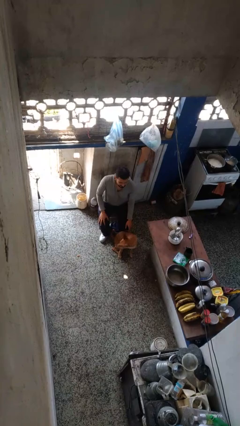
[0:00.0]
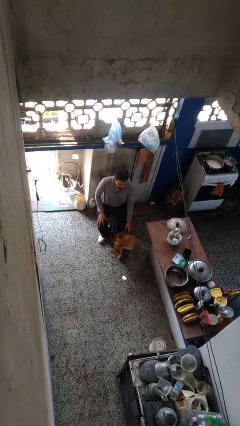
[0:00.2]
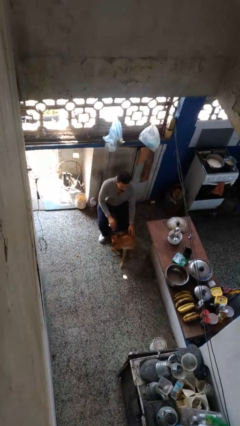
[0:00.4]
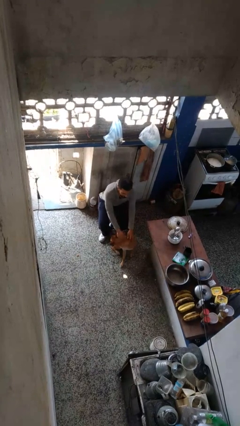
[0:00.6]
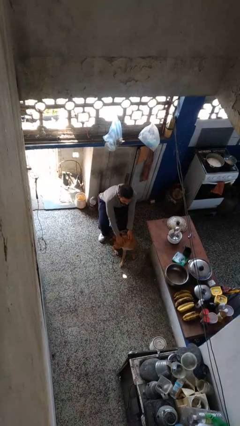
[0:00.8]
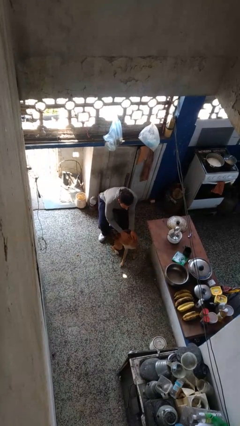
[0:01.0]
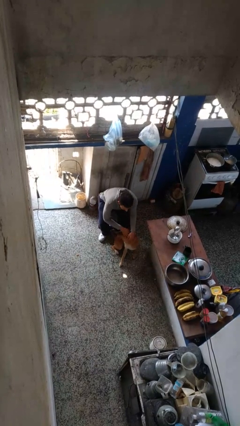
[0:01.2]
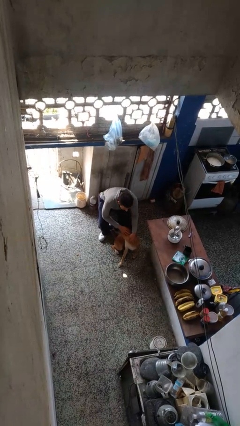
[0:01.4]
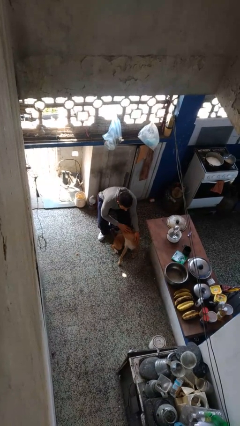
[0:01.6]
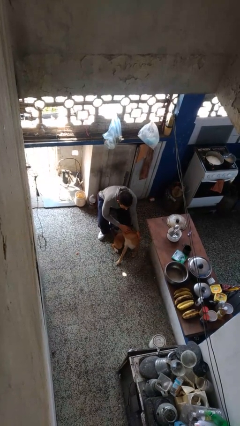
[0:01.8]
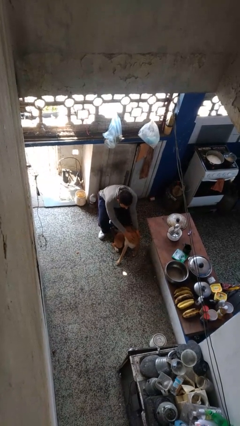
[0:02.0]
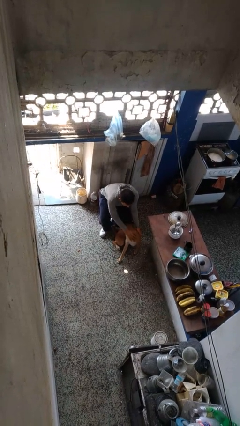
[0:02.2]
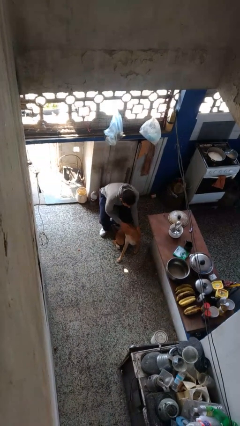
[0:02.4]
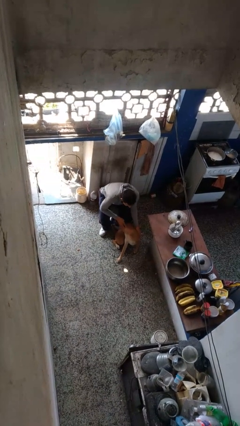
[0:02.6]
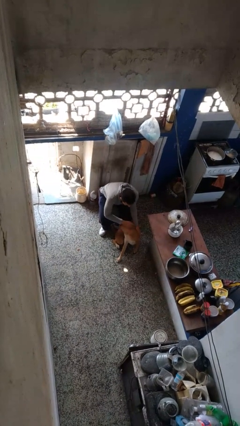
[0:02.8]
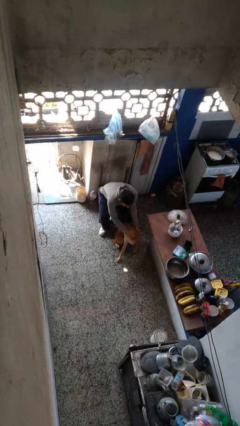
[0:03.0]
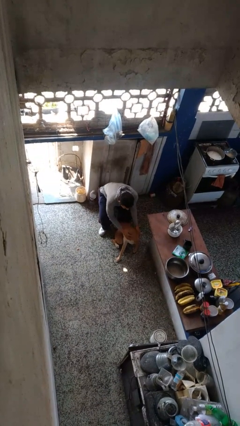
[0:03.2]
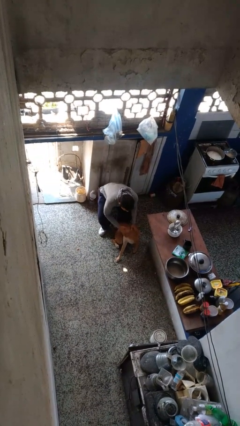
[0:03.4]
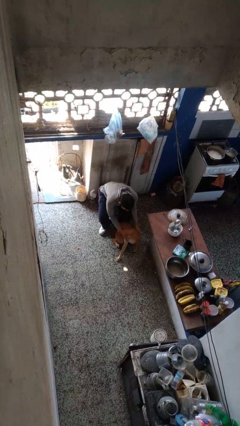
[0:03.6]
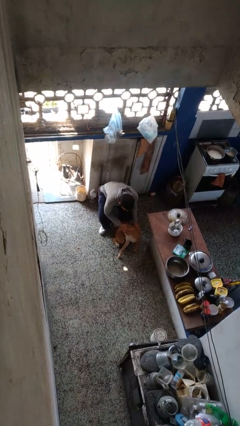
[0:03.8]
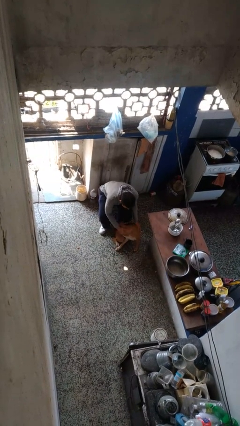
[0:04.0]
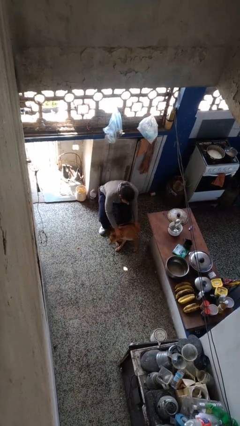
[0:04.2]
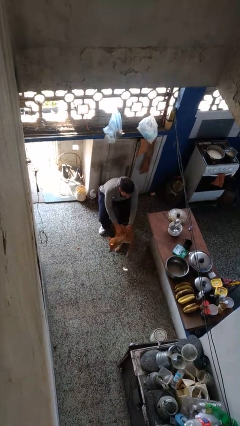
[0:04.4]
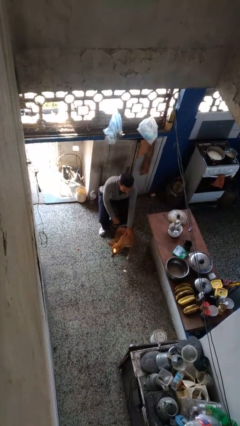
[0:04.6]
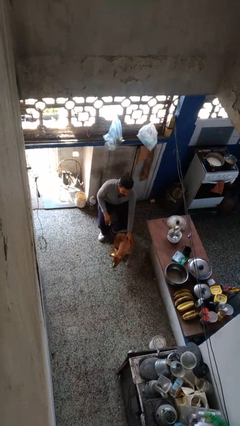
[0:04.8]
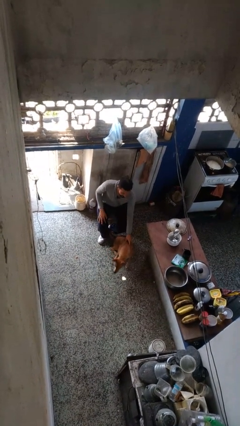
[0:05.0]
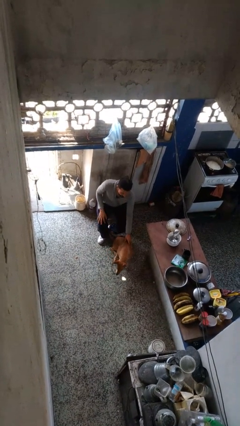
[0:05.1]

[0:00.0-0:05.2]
person pets dog

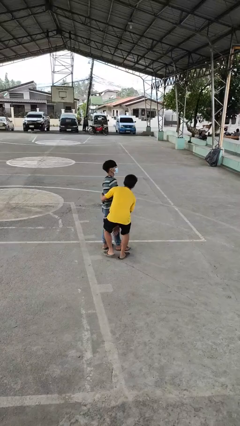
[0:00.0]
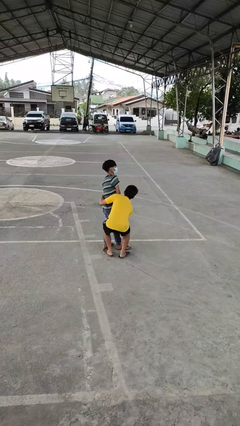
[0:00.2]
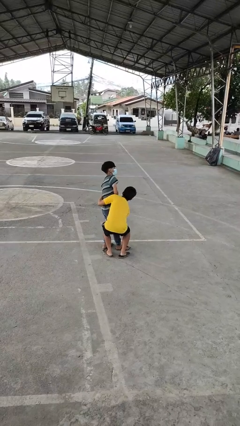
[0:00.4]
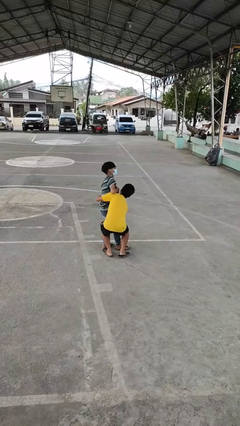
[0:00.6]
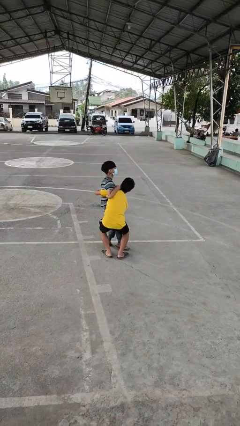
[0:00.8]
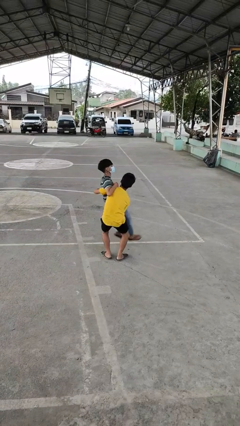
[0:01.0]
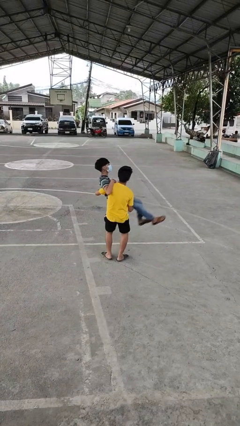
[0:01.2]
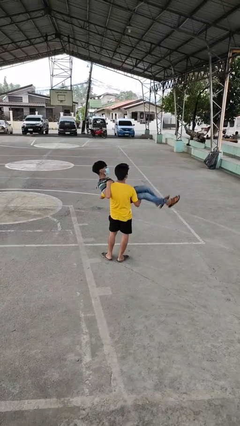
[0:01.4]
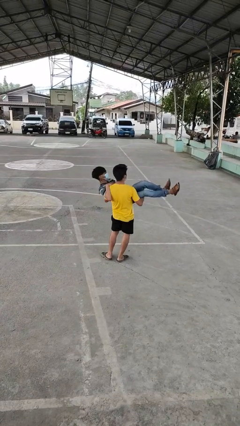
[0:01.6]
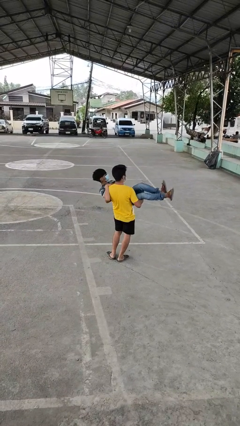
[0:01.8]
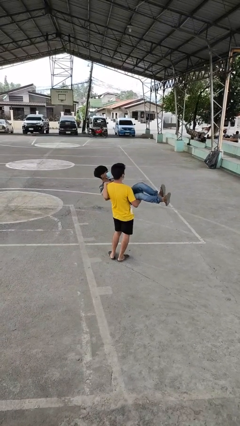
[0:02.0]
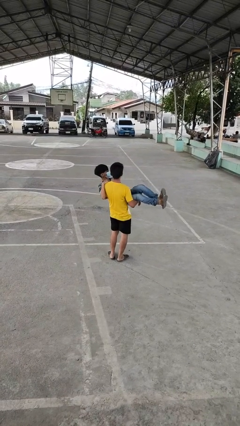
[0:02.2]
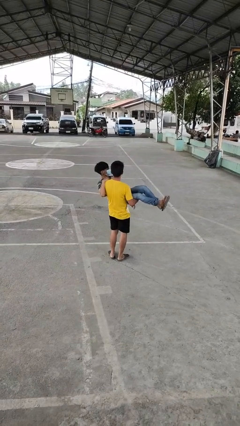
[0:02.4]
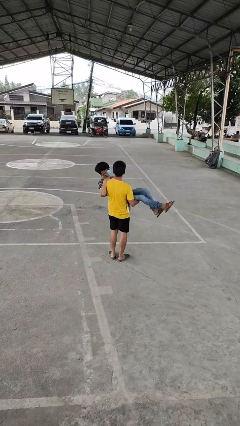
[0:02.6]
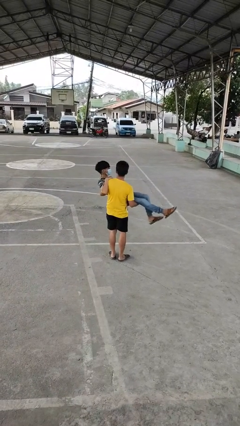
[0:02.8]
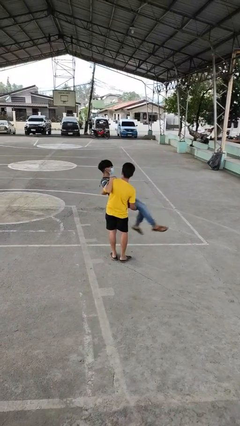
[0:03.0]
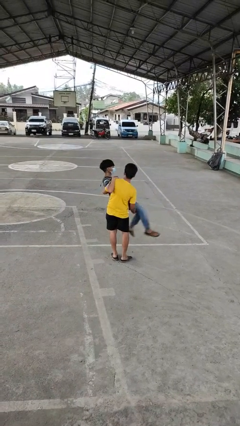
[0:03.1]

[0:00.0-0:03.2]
person picks up person

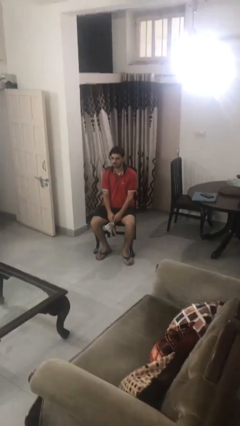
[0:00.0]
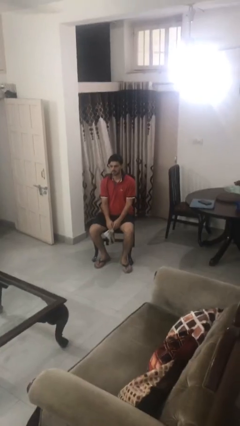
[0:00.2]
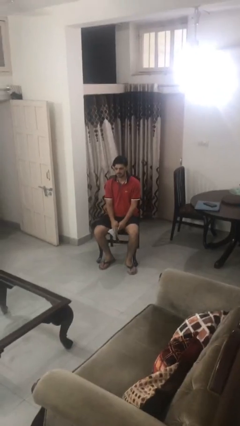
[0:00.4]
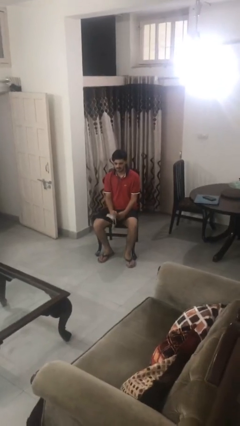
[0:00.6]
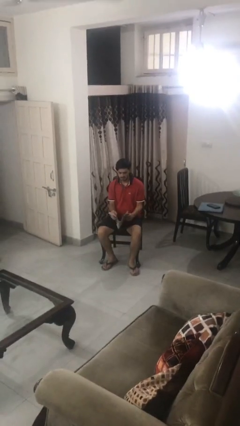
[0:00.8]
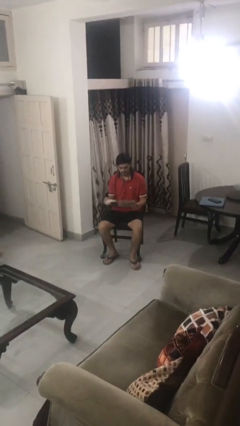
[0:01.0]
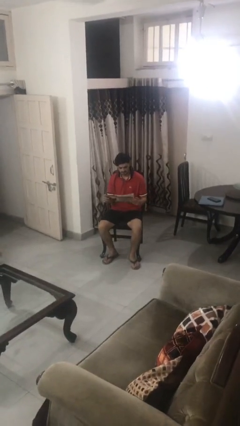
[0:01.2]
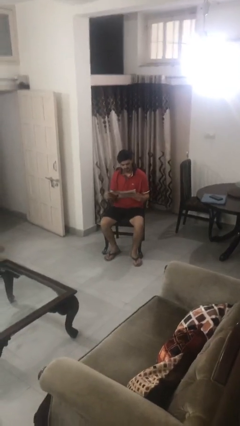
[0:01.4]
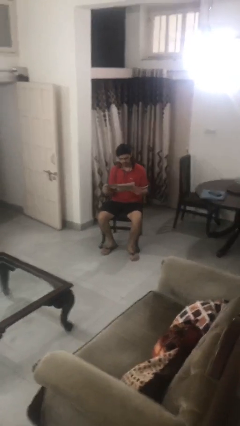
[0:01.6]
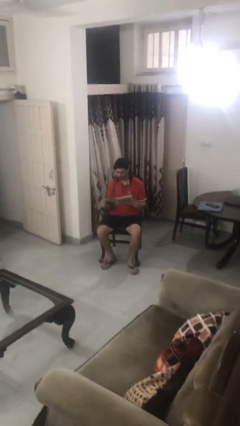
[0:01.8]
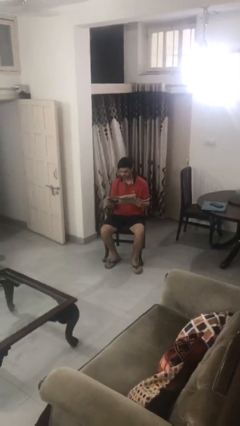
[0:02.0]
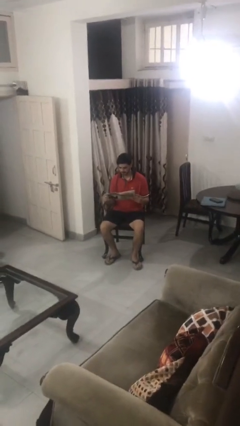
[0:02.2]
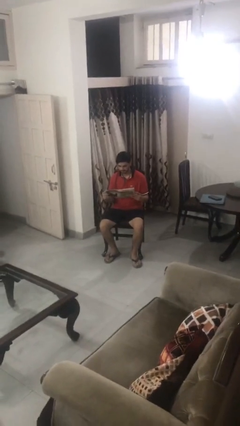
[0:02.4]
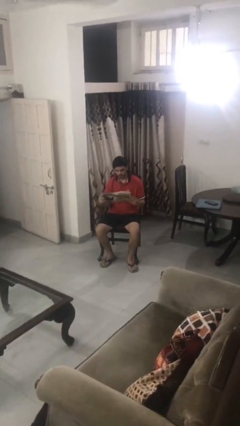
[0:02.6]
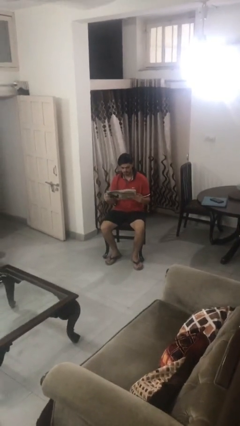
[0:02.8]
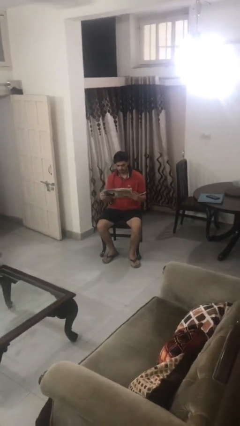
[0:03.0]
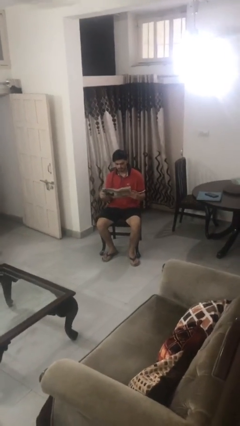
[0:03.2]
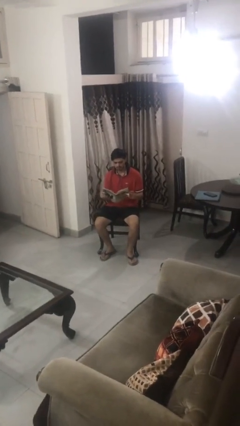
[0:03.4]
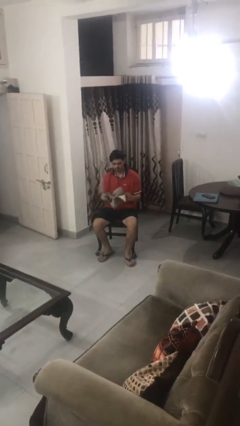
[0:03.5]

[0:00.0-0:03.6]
person reads newspaper

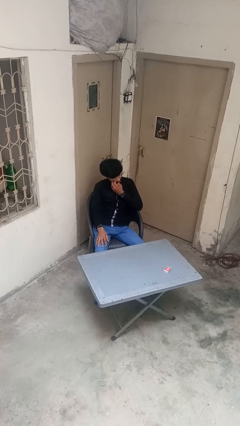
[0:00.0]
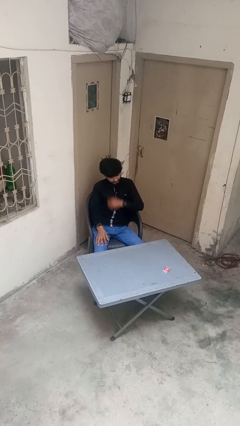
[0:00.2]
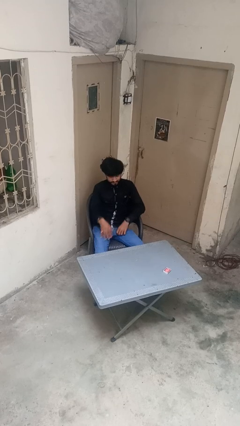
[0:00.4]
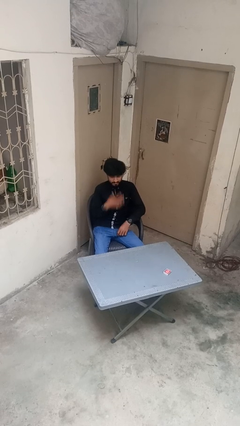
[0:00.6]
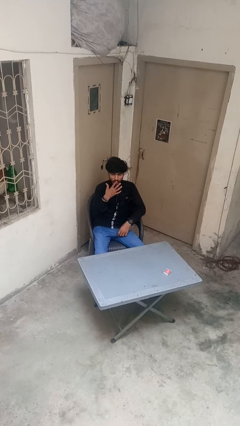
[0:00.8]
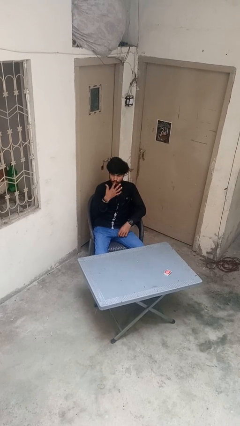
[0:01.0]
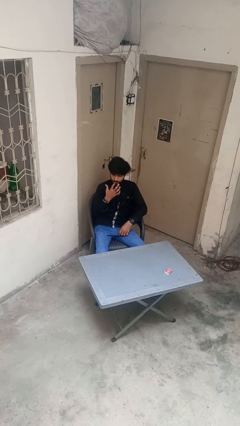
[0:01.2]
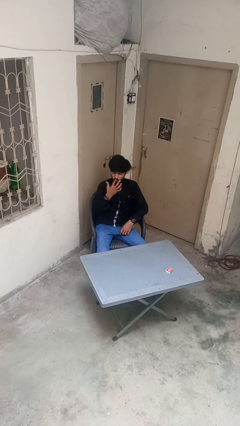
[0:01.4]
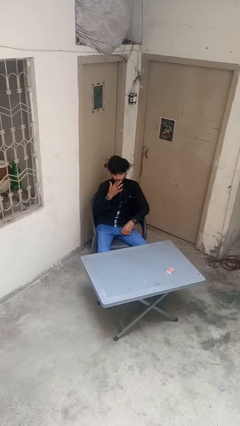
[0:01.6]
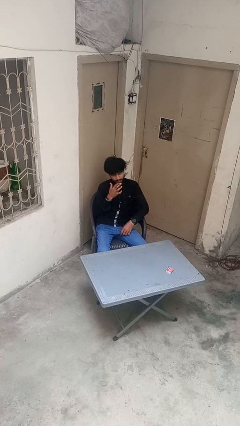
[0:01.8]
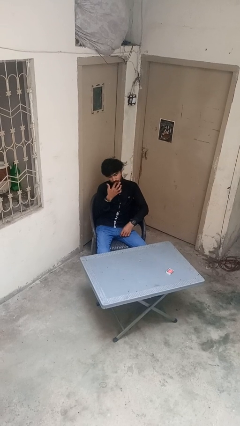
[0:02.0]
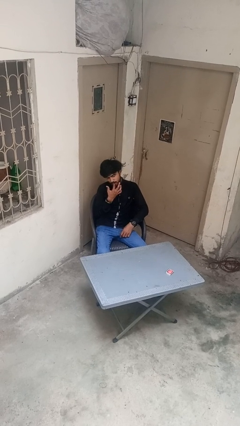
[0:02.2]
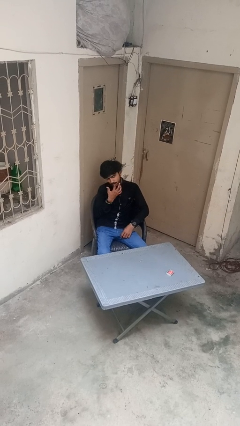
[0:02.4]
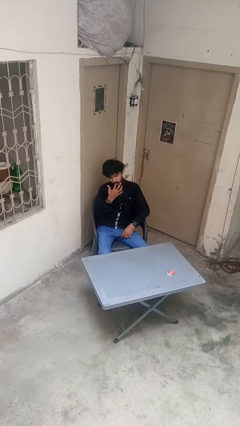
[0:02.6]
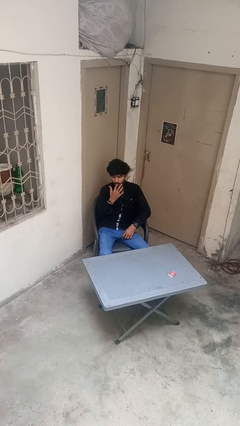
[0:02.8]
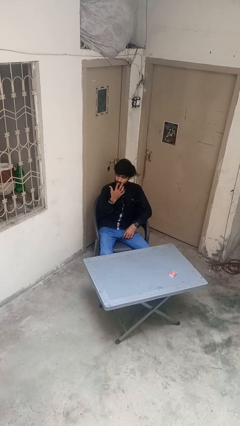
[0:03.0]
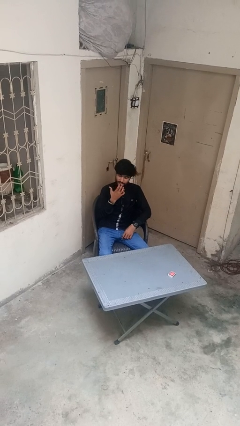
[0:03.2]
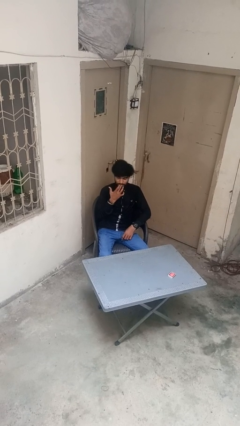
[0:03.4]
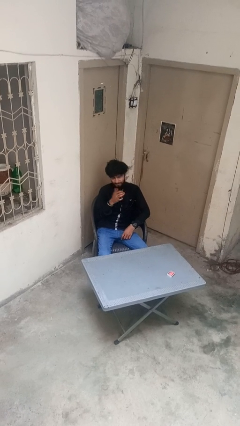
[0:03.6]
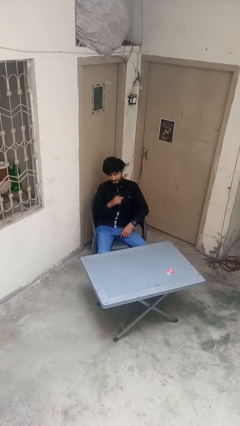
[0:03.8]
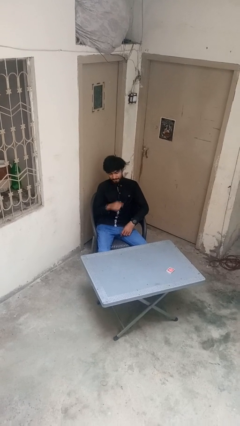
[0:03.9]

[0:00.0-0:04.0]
person licks fingers

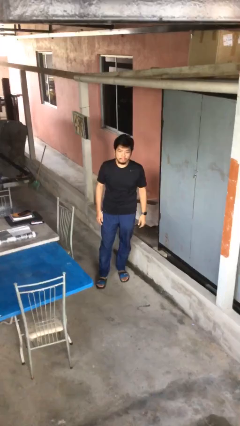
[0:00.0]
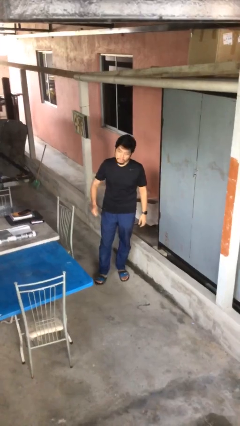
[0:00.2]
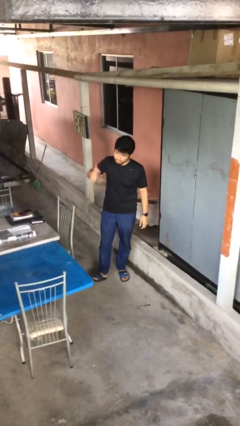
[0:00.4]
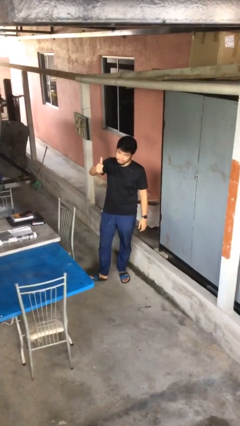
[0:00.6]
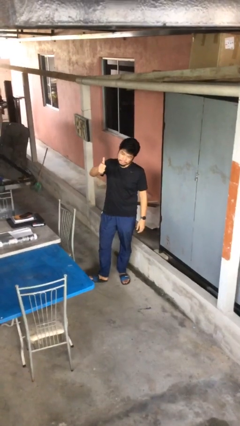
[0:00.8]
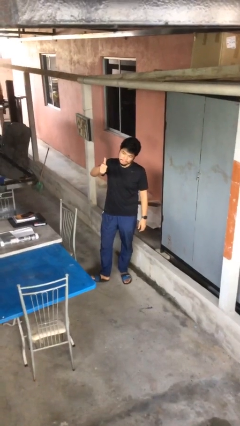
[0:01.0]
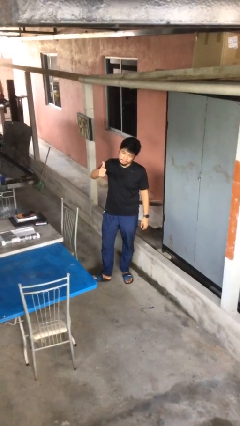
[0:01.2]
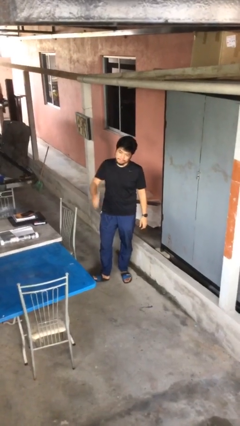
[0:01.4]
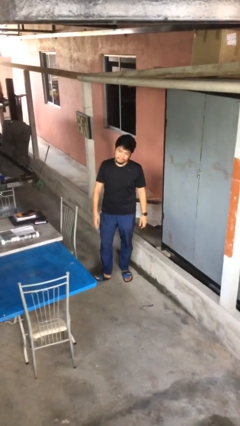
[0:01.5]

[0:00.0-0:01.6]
person gestures thumbs up
